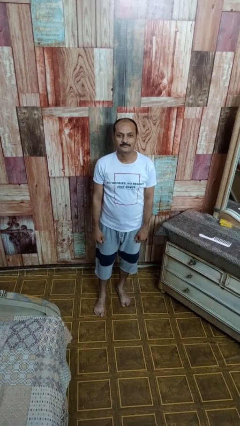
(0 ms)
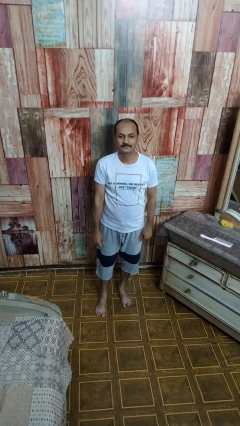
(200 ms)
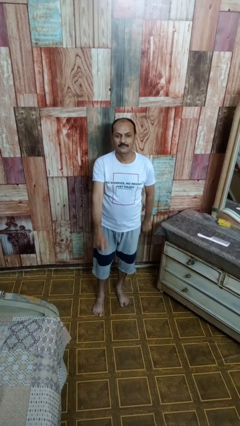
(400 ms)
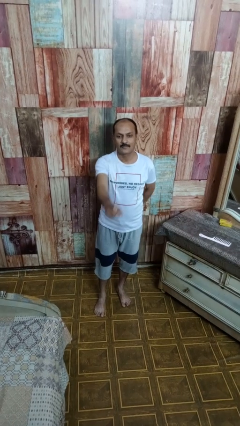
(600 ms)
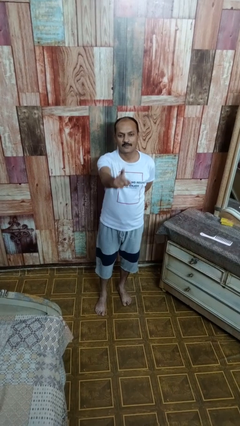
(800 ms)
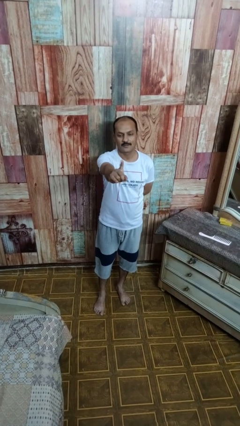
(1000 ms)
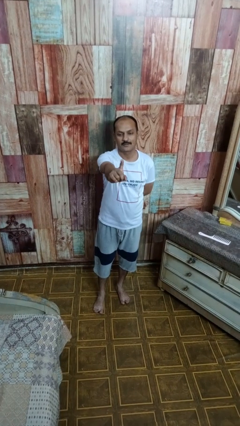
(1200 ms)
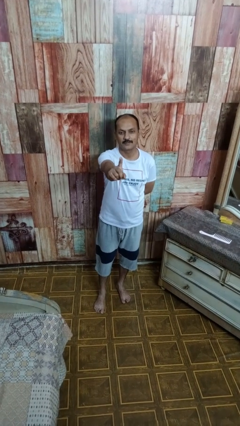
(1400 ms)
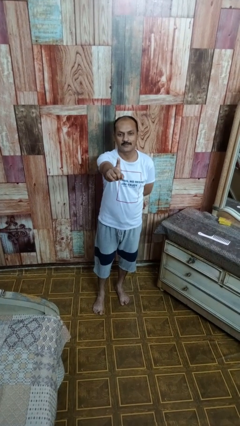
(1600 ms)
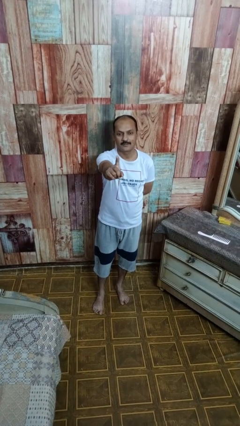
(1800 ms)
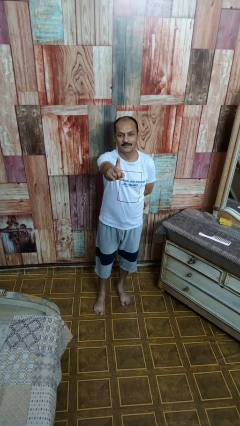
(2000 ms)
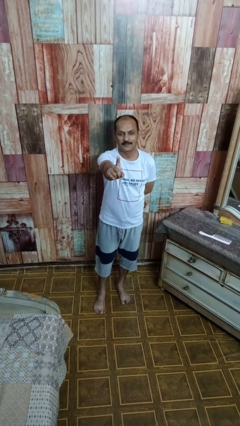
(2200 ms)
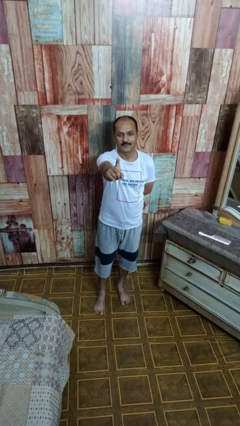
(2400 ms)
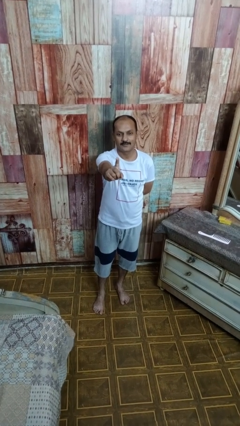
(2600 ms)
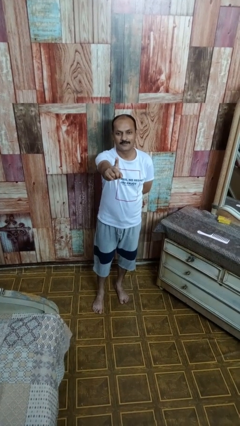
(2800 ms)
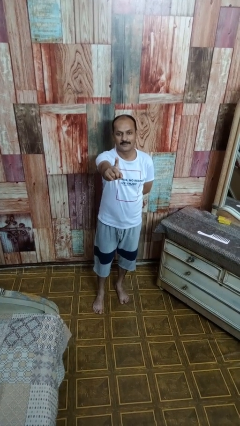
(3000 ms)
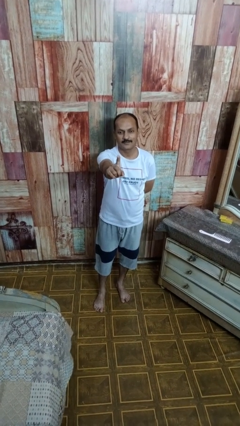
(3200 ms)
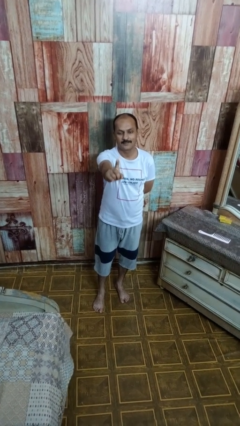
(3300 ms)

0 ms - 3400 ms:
person gestures number one

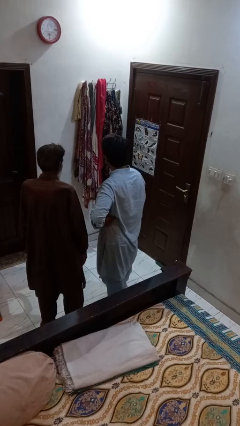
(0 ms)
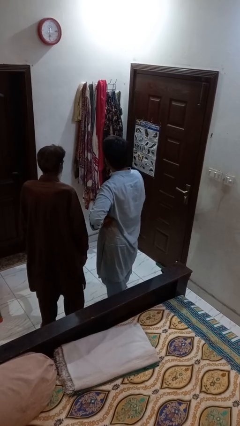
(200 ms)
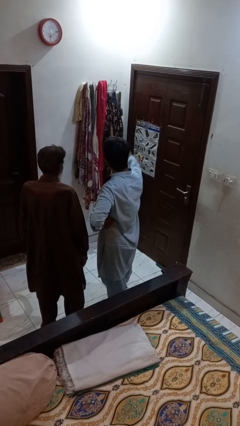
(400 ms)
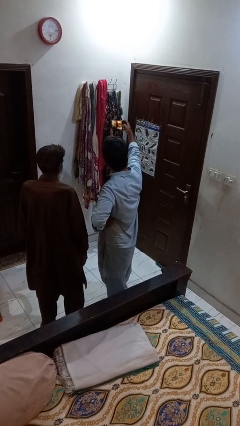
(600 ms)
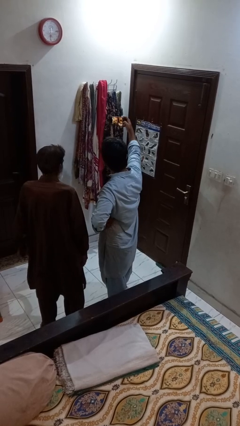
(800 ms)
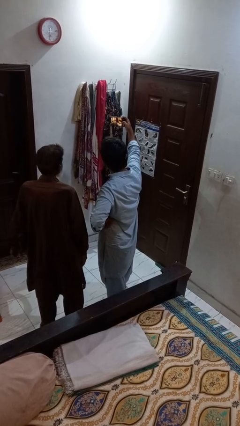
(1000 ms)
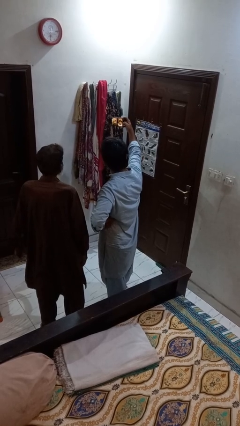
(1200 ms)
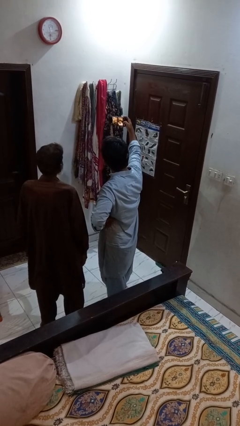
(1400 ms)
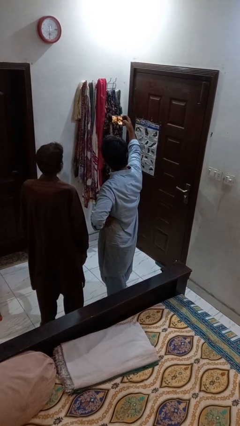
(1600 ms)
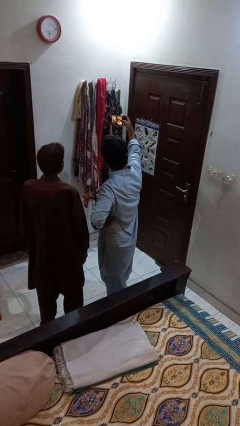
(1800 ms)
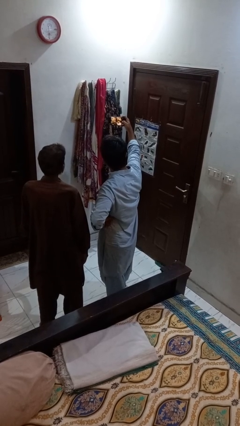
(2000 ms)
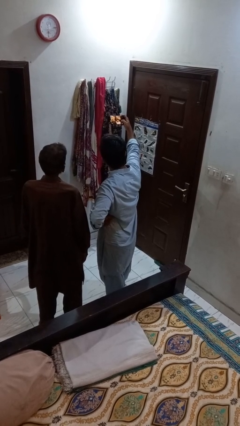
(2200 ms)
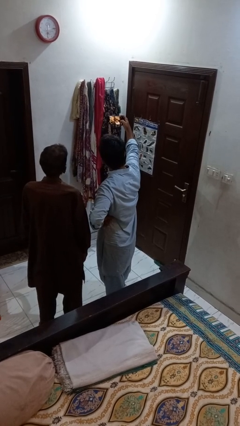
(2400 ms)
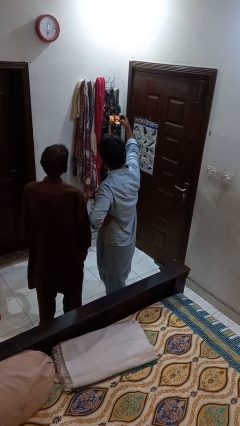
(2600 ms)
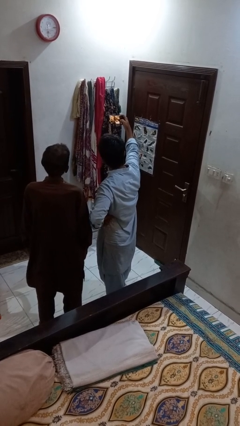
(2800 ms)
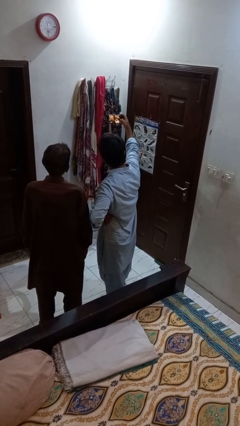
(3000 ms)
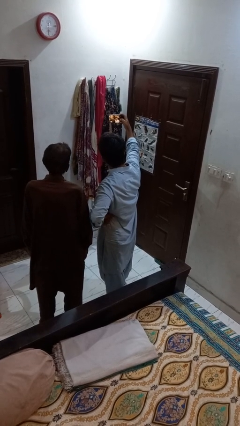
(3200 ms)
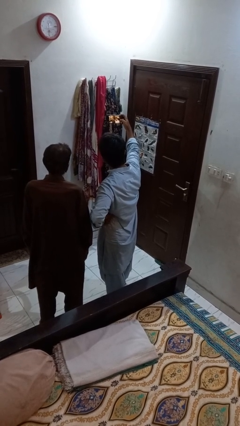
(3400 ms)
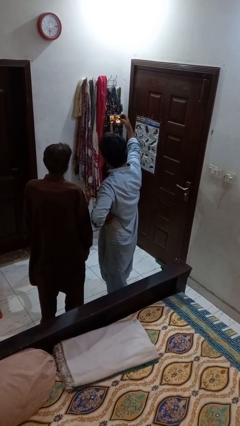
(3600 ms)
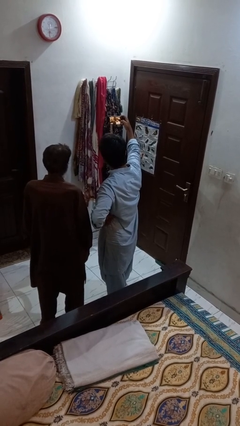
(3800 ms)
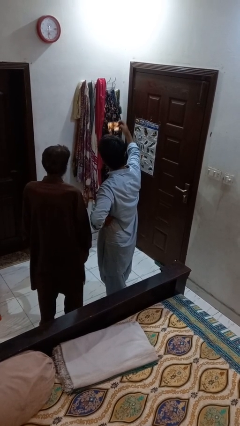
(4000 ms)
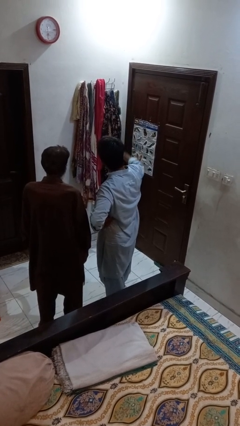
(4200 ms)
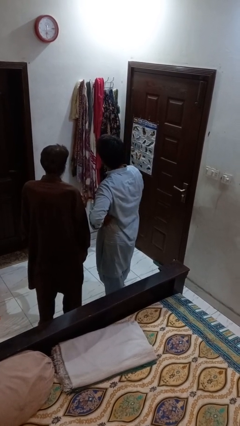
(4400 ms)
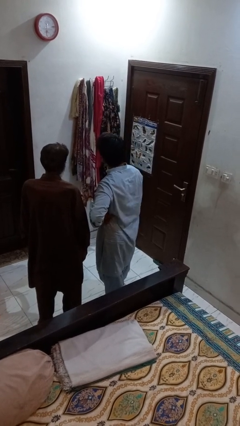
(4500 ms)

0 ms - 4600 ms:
person takes selfie with person

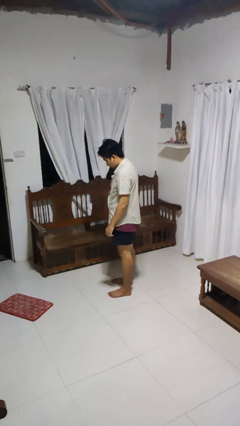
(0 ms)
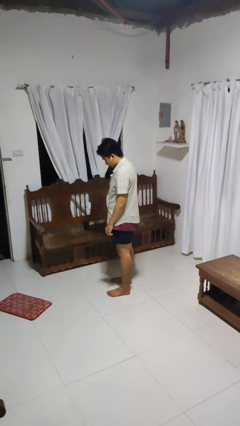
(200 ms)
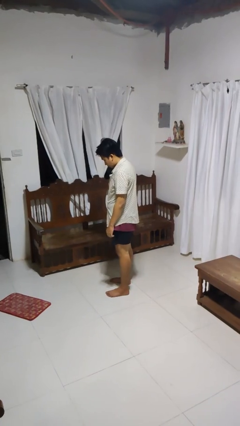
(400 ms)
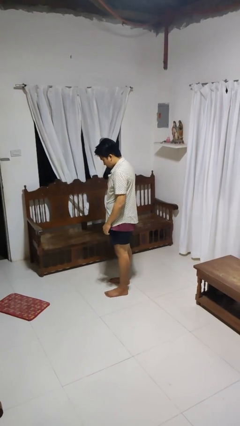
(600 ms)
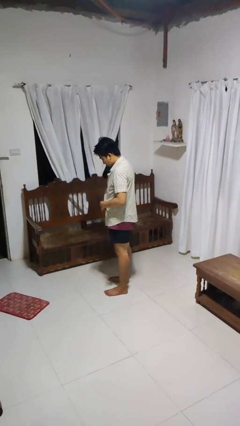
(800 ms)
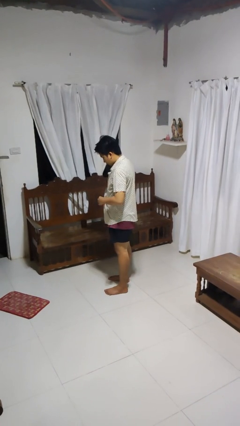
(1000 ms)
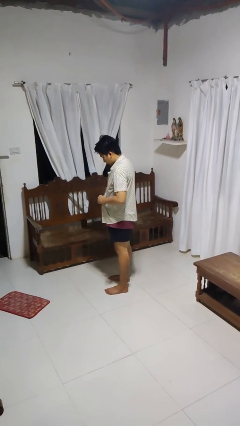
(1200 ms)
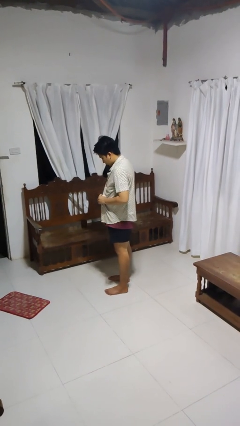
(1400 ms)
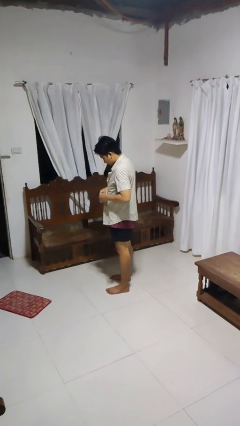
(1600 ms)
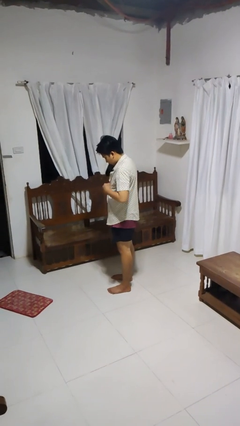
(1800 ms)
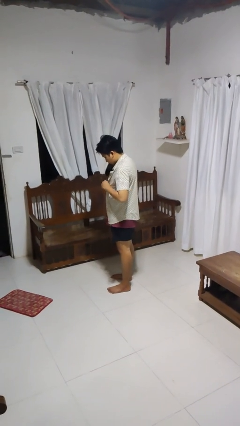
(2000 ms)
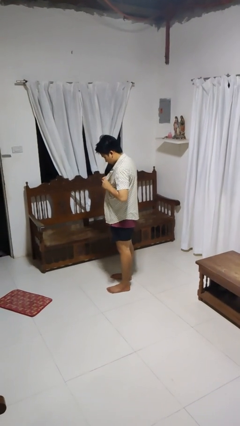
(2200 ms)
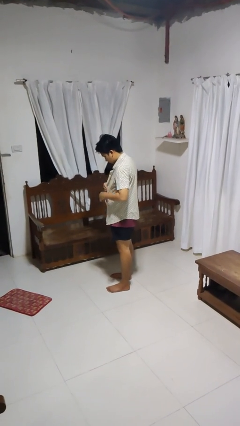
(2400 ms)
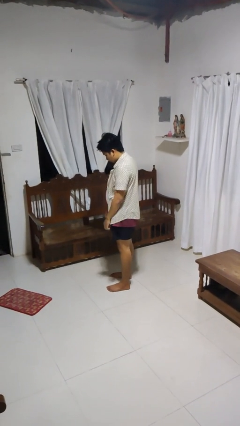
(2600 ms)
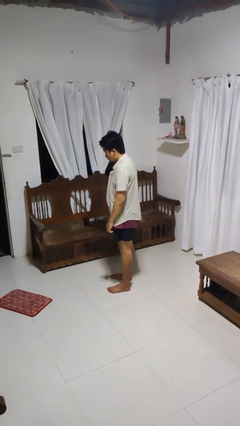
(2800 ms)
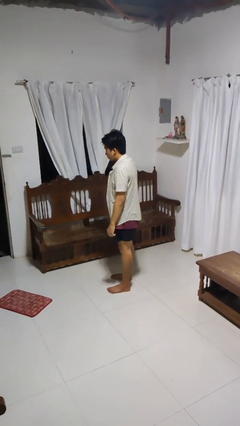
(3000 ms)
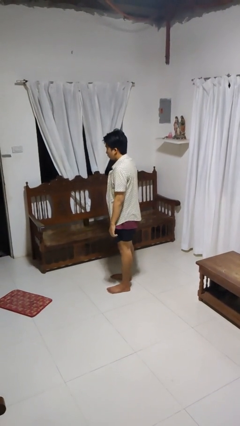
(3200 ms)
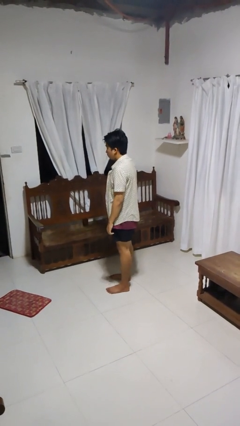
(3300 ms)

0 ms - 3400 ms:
person unbuttons shirt

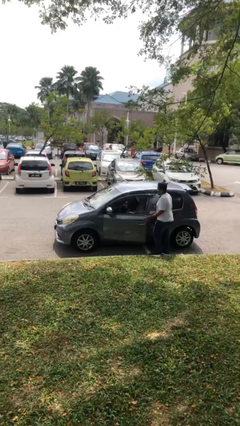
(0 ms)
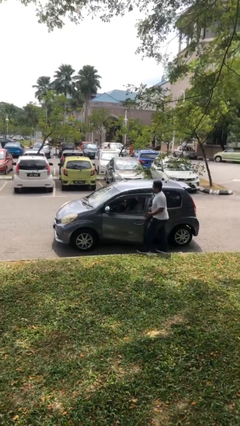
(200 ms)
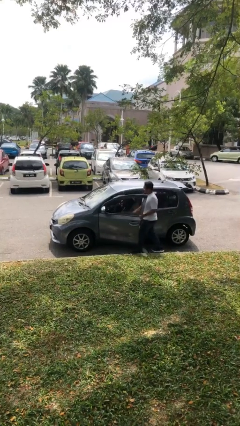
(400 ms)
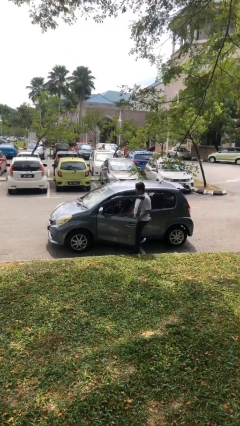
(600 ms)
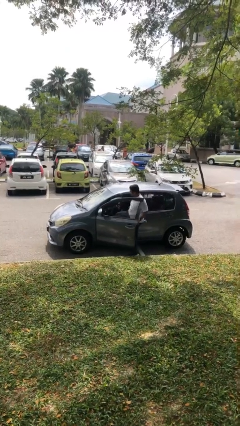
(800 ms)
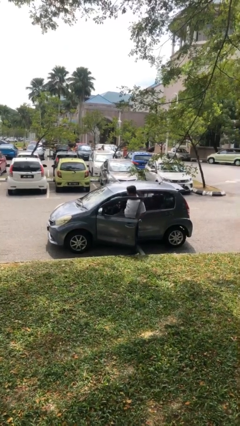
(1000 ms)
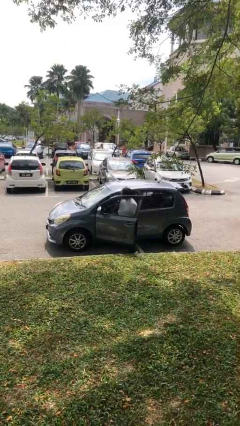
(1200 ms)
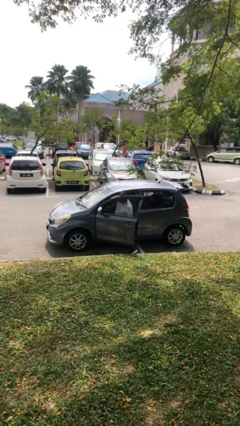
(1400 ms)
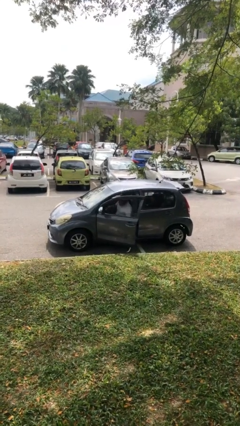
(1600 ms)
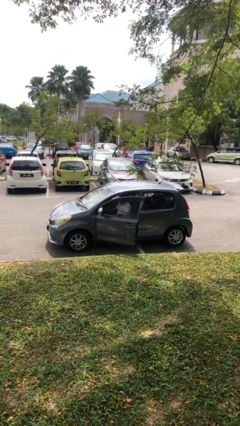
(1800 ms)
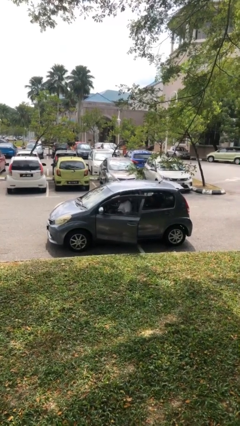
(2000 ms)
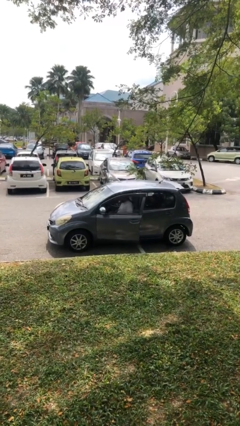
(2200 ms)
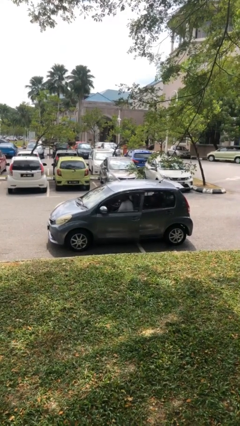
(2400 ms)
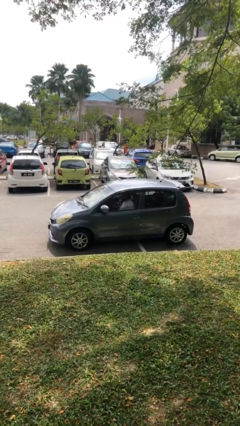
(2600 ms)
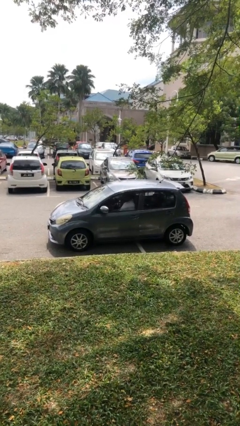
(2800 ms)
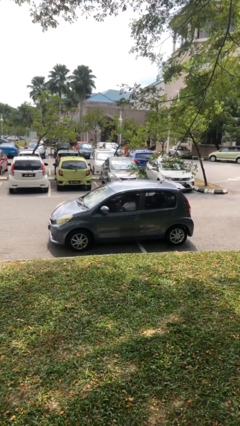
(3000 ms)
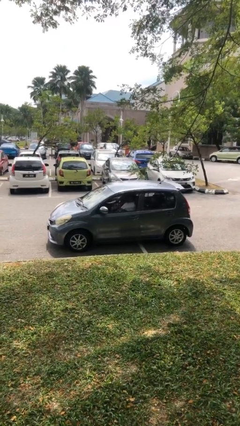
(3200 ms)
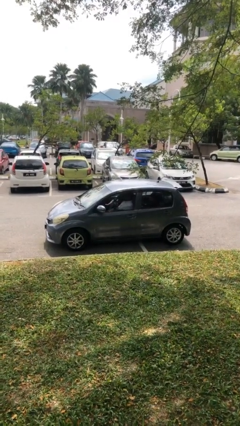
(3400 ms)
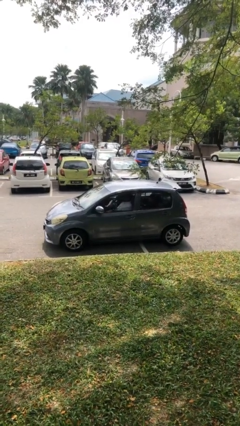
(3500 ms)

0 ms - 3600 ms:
car picks up person

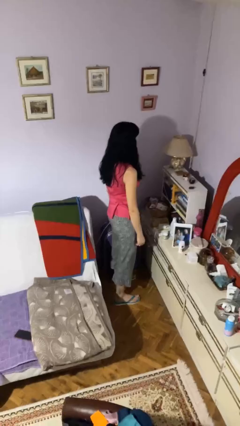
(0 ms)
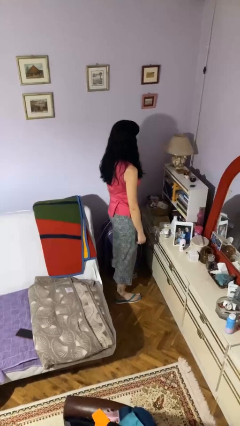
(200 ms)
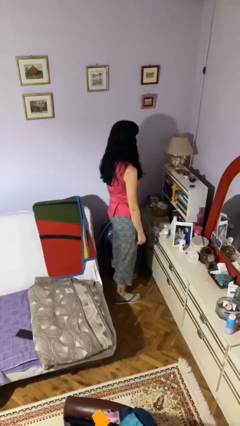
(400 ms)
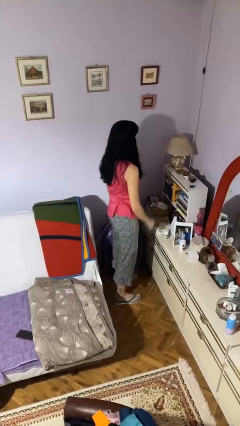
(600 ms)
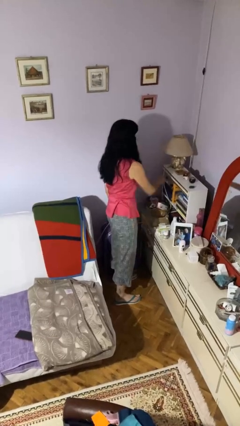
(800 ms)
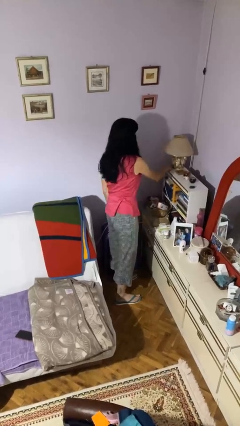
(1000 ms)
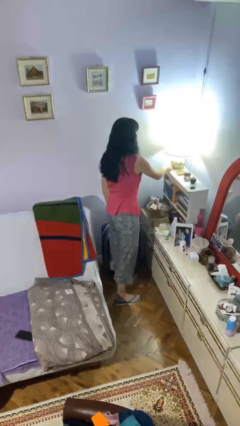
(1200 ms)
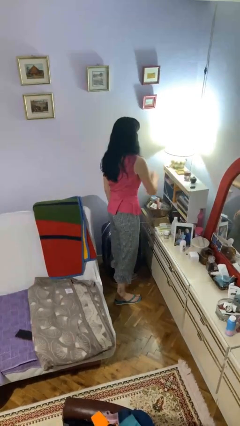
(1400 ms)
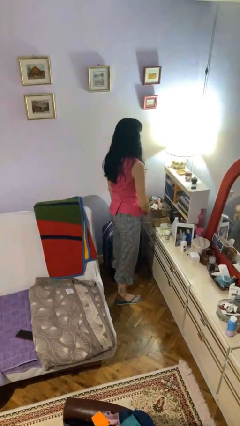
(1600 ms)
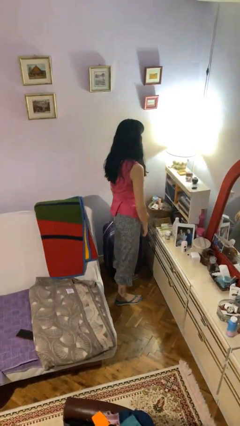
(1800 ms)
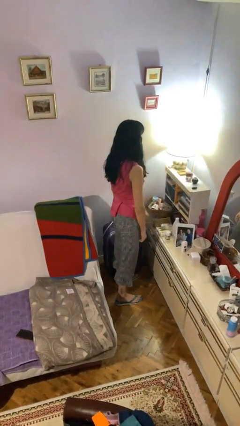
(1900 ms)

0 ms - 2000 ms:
person turns on lamp

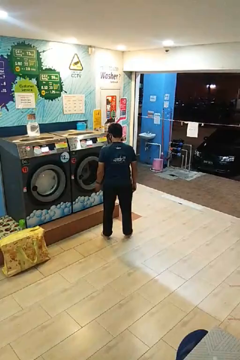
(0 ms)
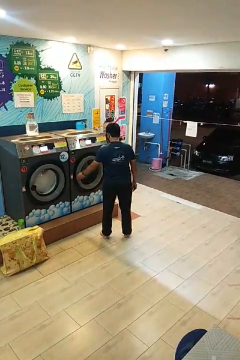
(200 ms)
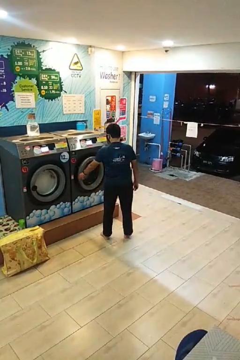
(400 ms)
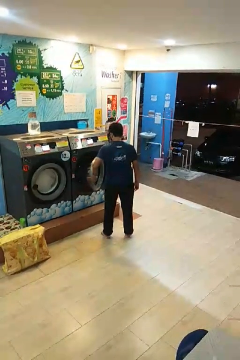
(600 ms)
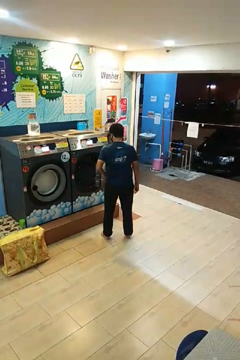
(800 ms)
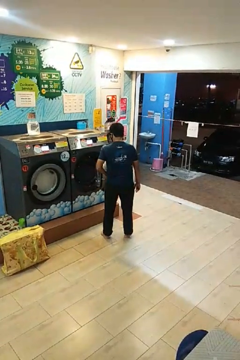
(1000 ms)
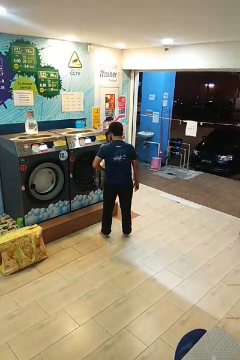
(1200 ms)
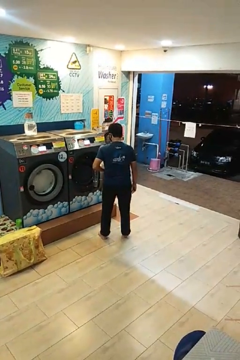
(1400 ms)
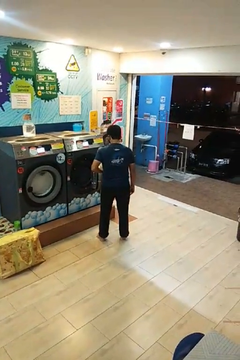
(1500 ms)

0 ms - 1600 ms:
person opens clothes washer
